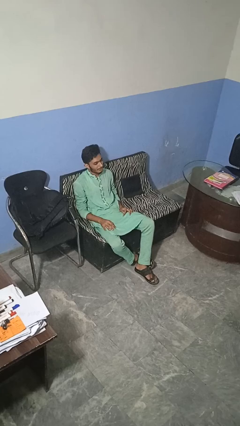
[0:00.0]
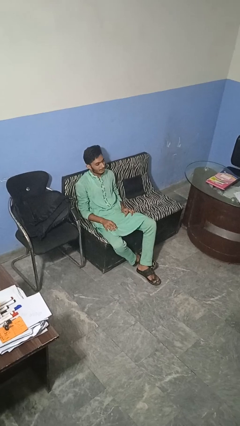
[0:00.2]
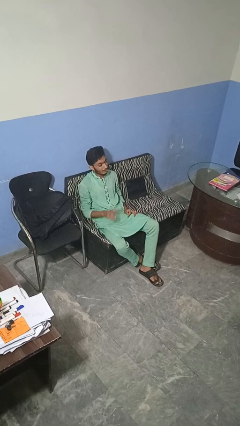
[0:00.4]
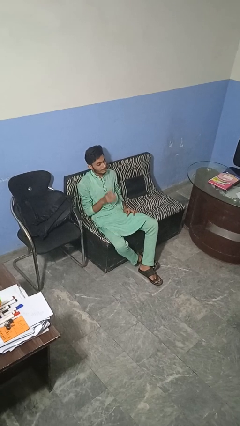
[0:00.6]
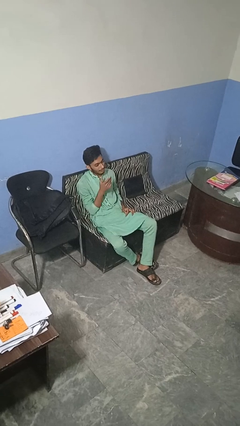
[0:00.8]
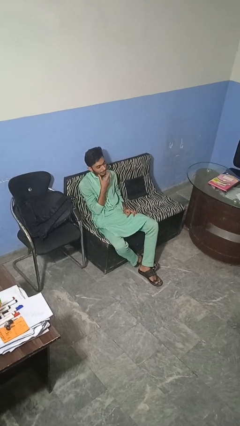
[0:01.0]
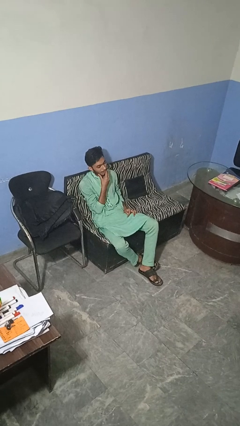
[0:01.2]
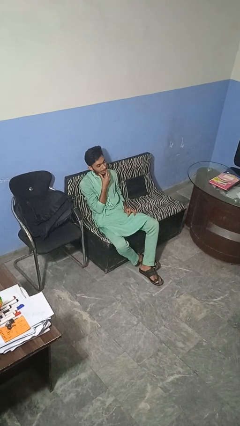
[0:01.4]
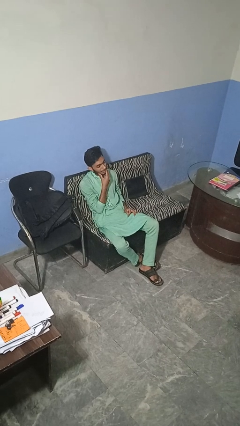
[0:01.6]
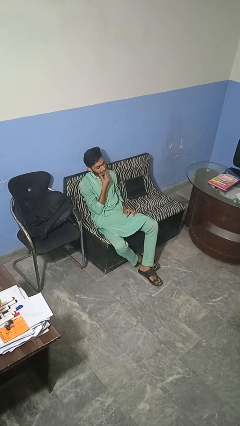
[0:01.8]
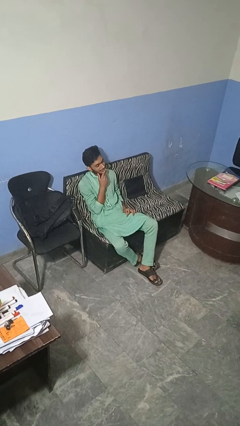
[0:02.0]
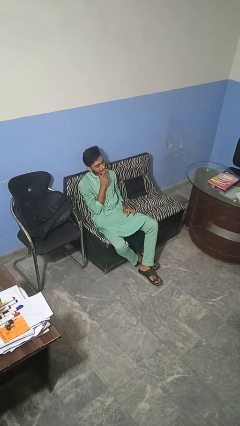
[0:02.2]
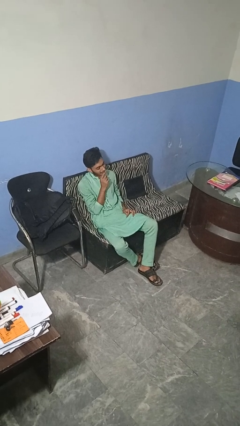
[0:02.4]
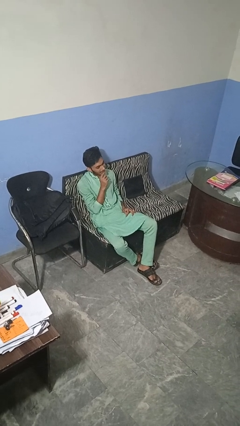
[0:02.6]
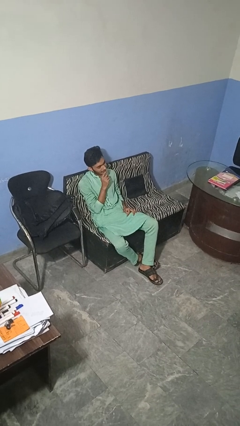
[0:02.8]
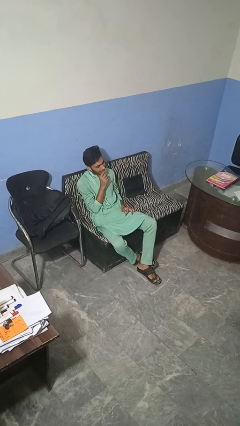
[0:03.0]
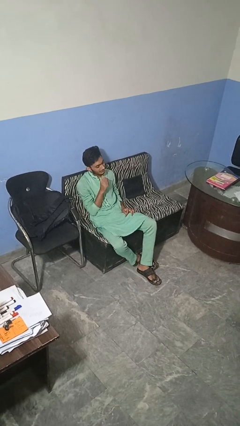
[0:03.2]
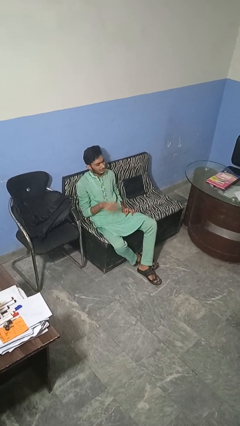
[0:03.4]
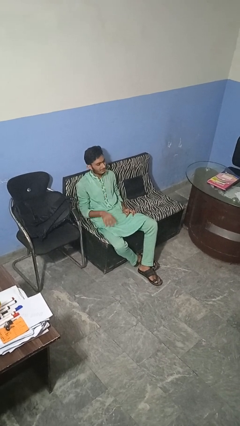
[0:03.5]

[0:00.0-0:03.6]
person strokes chin

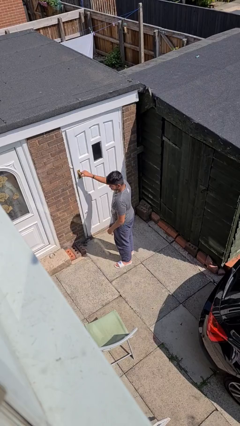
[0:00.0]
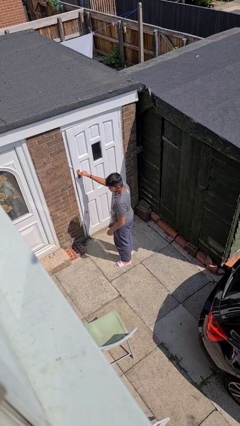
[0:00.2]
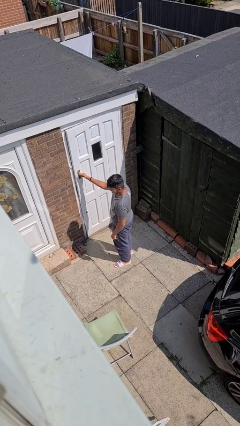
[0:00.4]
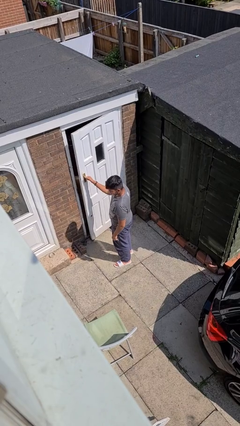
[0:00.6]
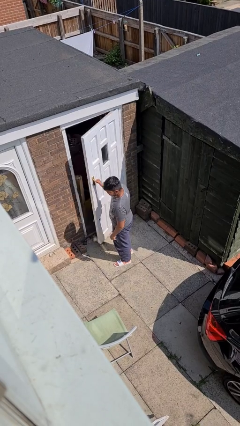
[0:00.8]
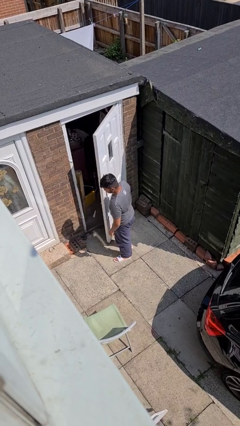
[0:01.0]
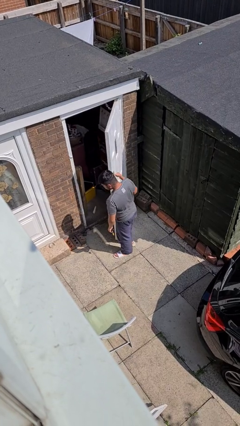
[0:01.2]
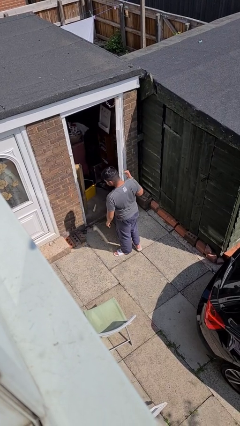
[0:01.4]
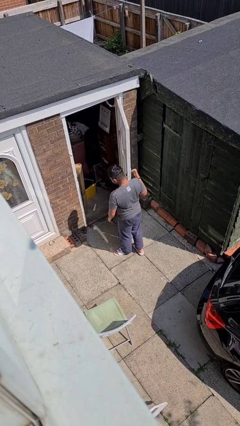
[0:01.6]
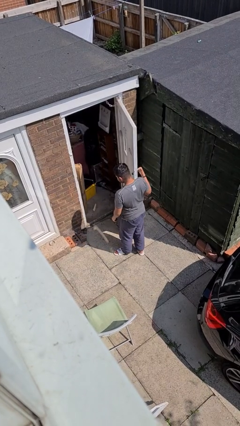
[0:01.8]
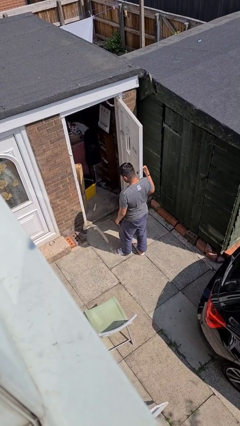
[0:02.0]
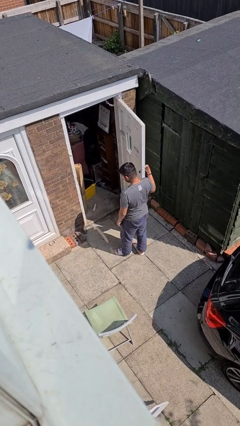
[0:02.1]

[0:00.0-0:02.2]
person opens facility door

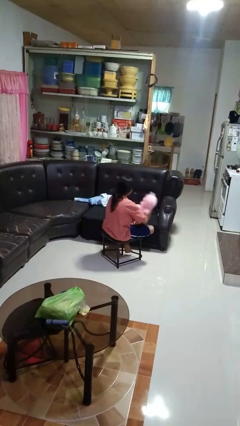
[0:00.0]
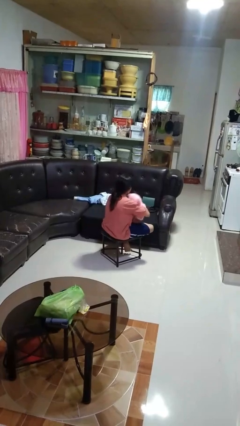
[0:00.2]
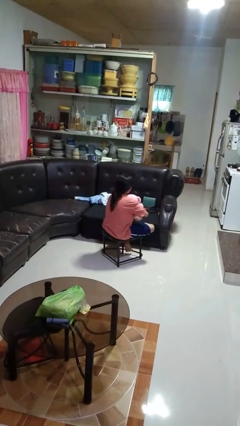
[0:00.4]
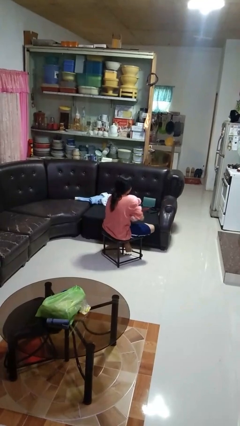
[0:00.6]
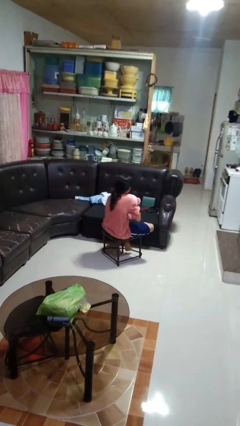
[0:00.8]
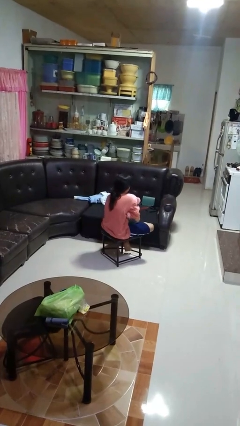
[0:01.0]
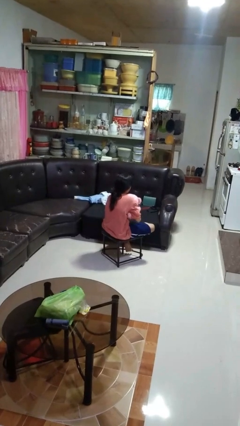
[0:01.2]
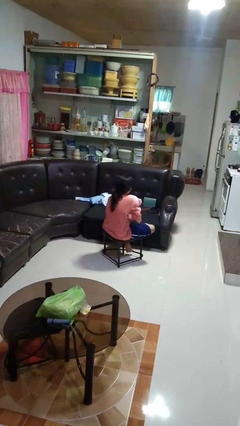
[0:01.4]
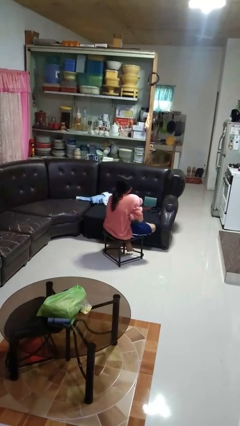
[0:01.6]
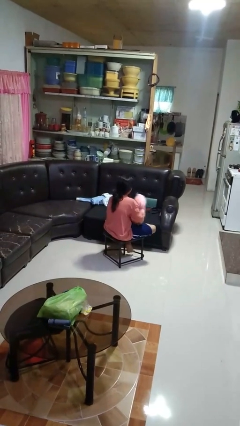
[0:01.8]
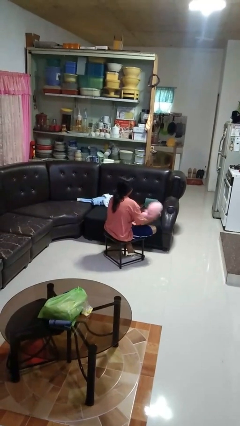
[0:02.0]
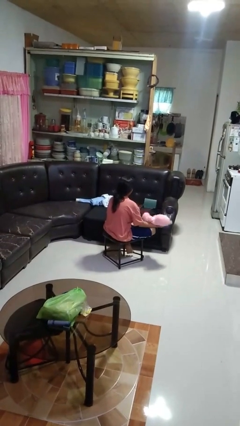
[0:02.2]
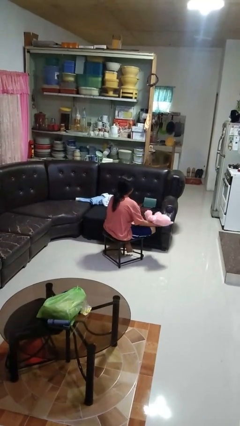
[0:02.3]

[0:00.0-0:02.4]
person hugs stuffed animal

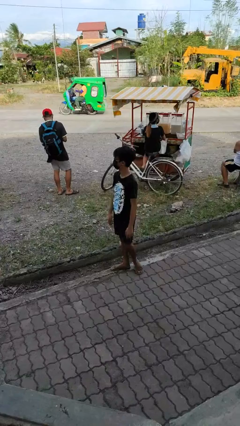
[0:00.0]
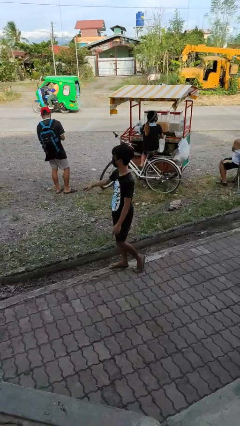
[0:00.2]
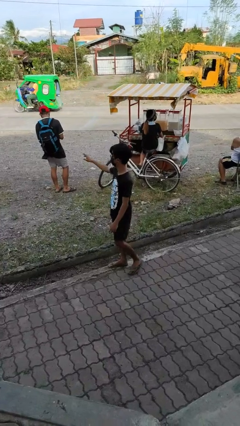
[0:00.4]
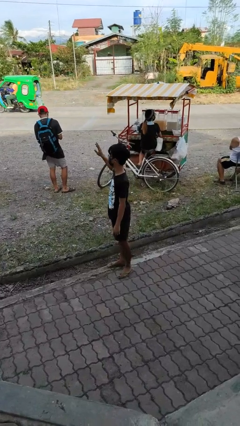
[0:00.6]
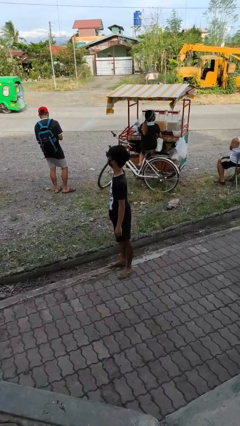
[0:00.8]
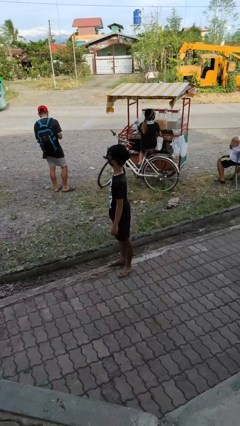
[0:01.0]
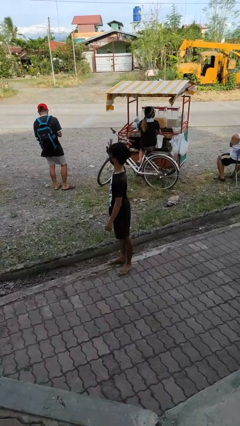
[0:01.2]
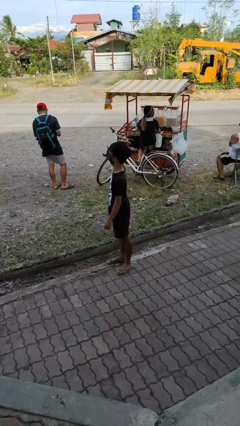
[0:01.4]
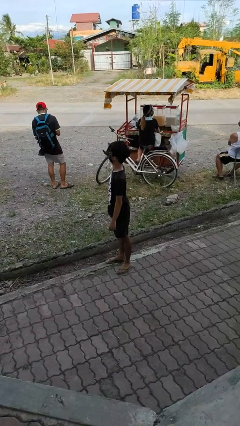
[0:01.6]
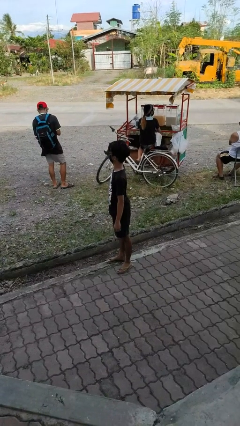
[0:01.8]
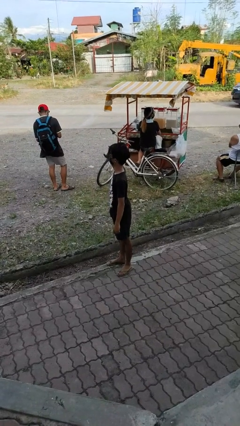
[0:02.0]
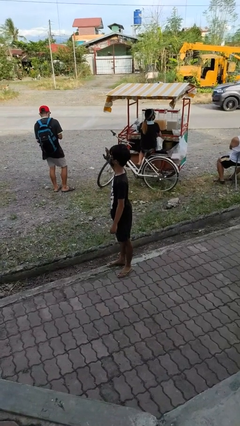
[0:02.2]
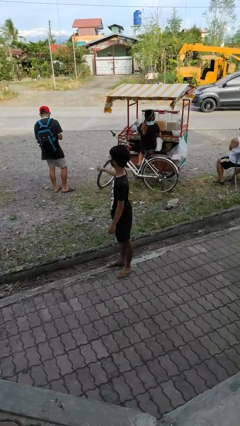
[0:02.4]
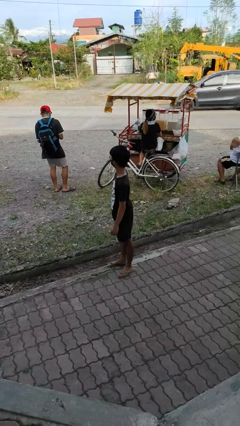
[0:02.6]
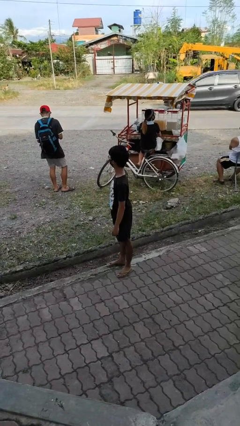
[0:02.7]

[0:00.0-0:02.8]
person waves at person

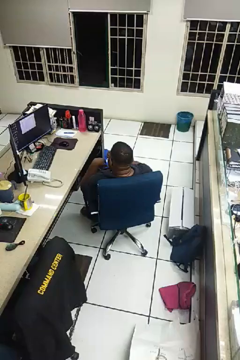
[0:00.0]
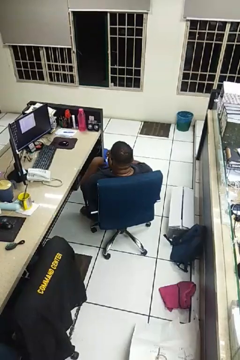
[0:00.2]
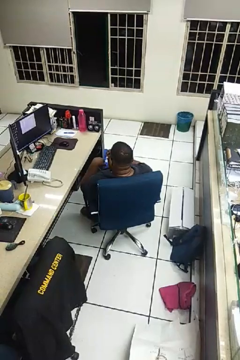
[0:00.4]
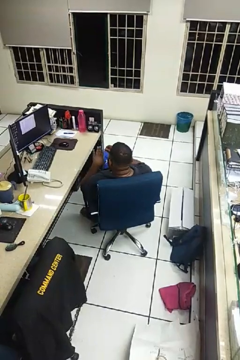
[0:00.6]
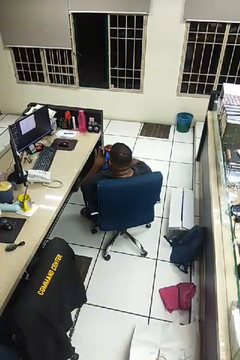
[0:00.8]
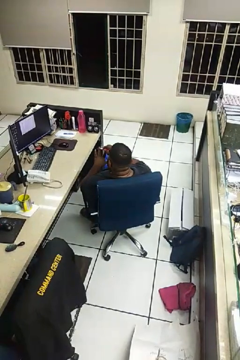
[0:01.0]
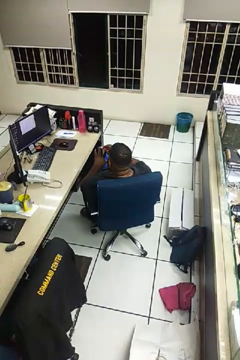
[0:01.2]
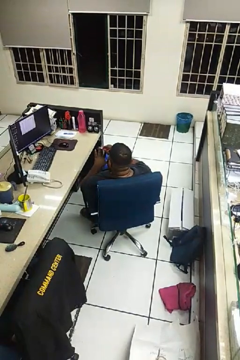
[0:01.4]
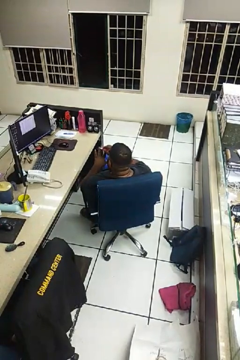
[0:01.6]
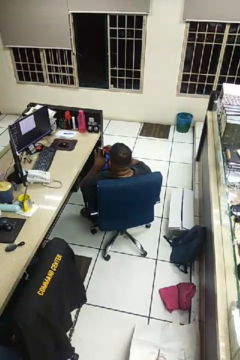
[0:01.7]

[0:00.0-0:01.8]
person paints fingernails

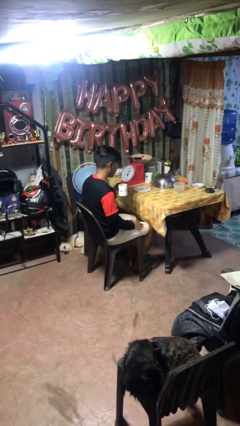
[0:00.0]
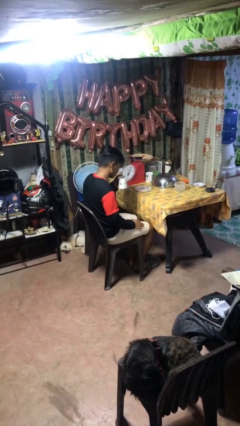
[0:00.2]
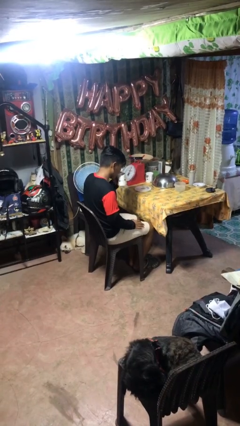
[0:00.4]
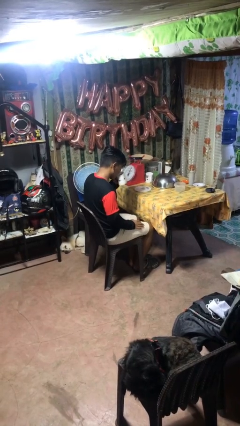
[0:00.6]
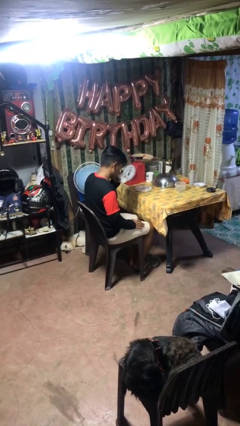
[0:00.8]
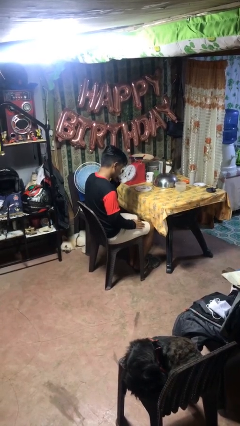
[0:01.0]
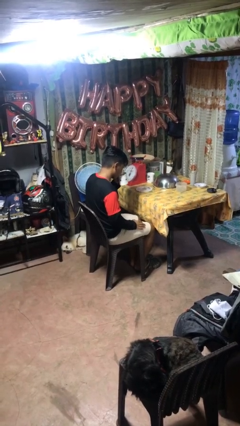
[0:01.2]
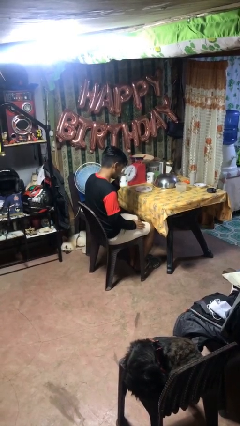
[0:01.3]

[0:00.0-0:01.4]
person drinks from mug

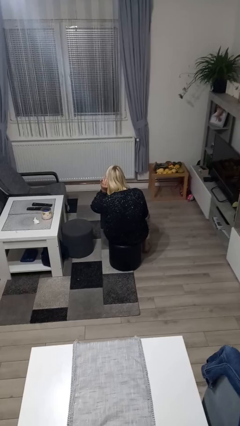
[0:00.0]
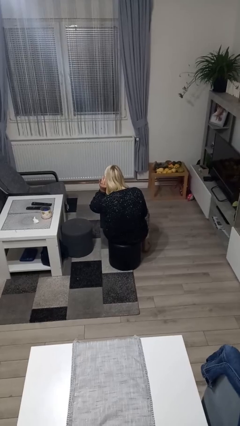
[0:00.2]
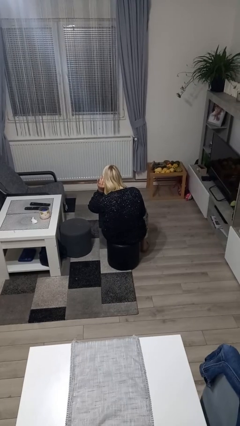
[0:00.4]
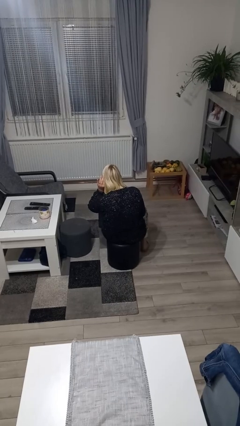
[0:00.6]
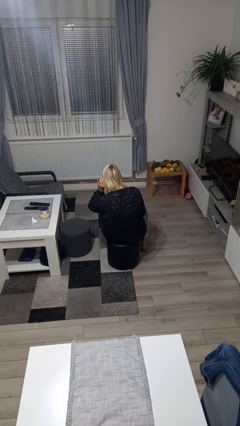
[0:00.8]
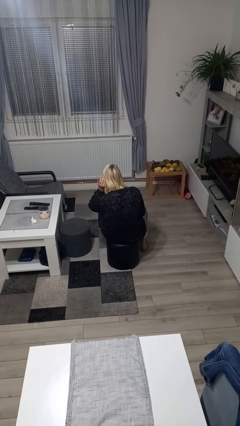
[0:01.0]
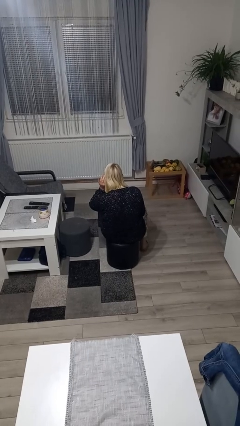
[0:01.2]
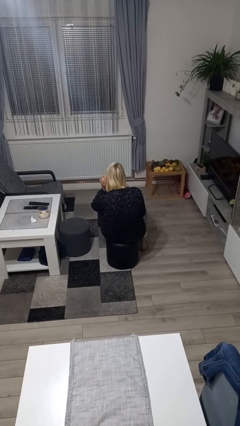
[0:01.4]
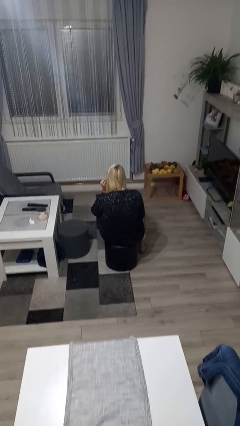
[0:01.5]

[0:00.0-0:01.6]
person gestures listen closely

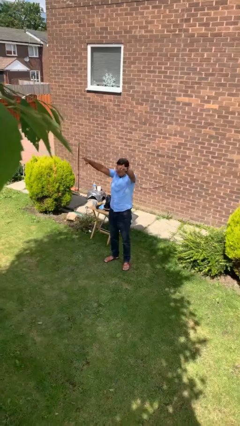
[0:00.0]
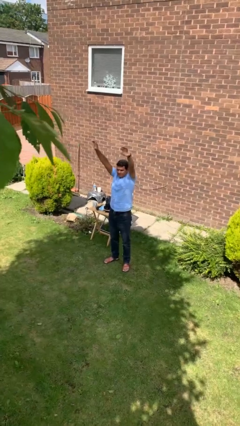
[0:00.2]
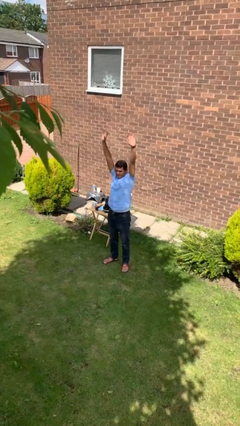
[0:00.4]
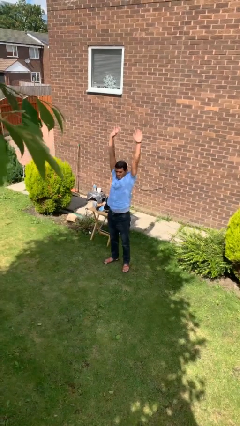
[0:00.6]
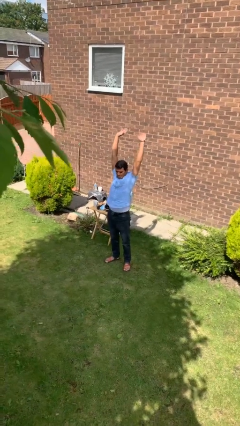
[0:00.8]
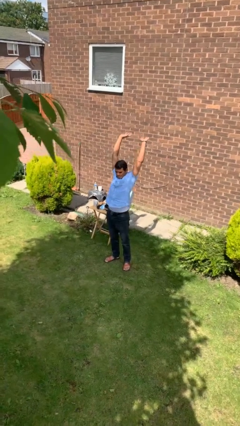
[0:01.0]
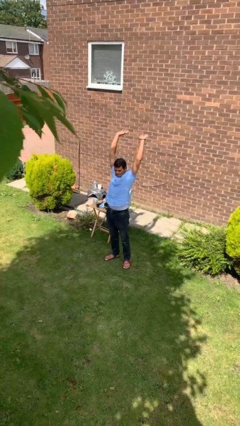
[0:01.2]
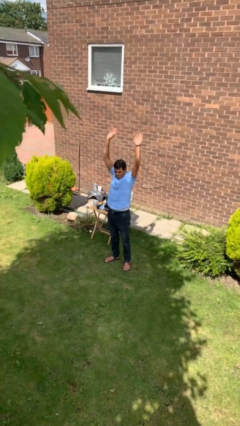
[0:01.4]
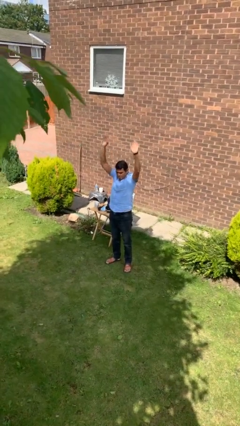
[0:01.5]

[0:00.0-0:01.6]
person stretches arms over head

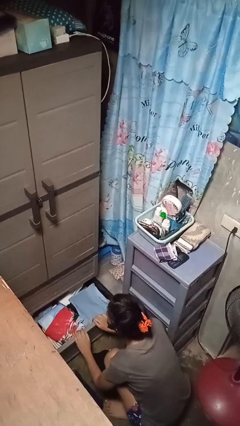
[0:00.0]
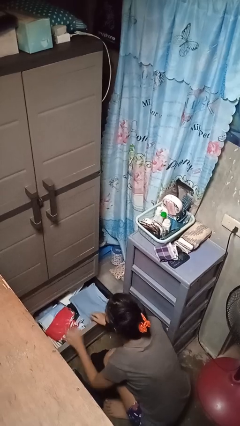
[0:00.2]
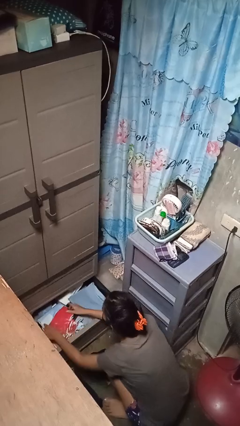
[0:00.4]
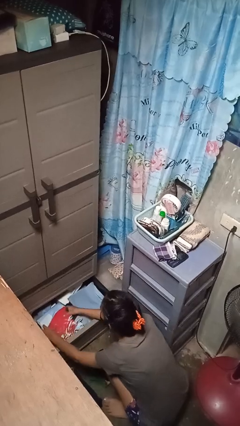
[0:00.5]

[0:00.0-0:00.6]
person takes clothes from dresser
